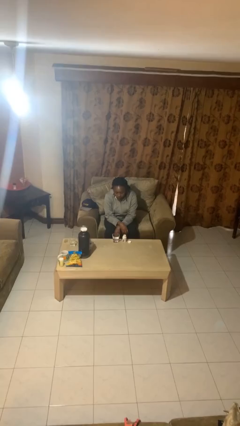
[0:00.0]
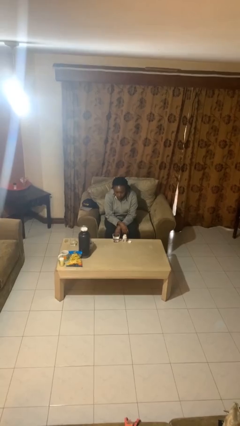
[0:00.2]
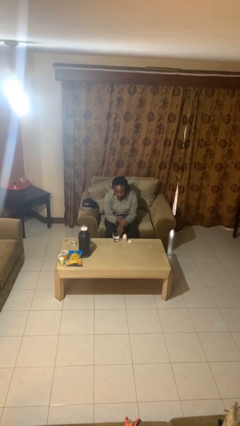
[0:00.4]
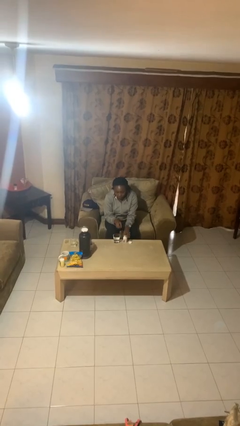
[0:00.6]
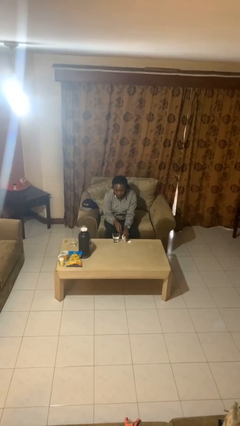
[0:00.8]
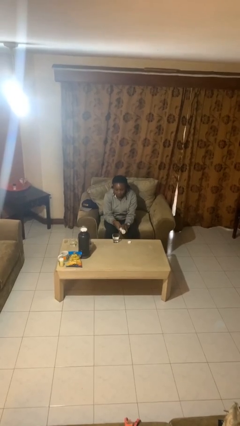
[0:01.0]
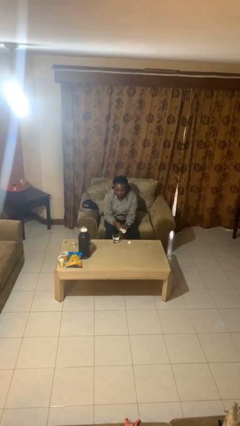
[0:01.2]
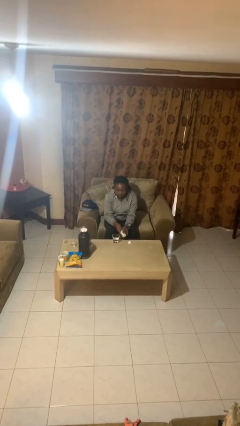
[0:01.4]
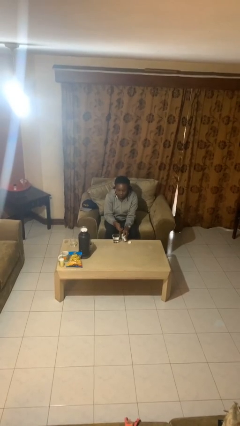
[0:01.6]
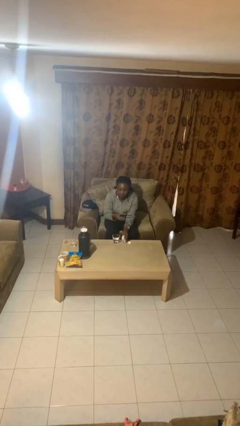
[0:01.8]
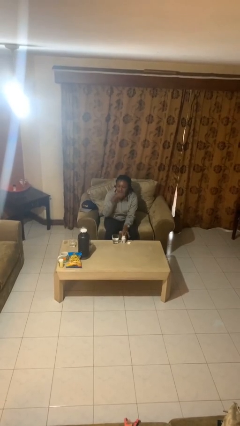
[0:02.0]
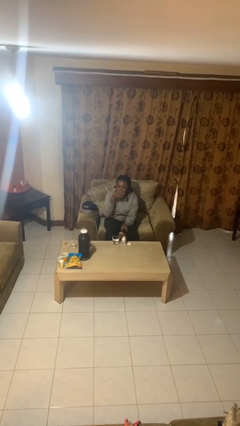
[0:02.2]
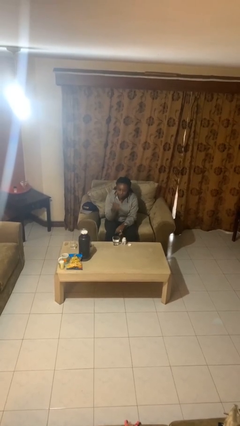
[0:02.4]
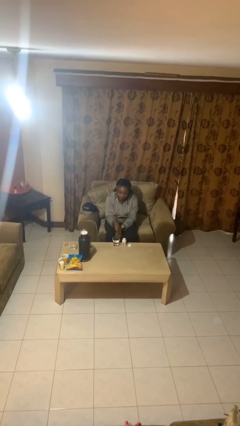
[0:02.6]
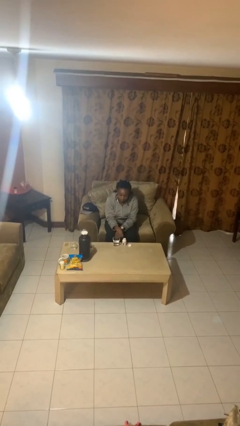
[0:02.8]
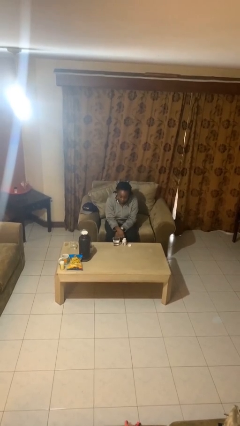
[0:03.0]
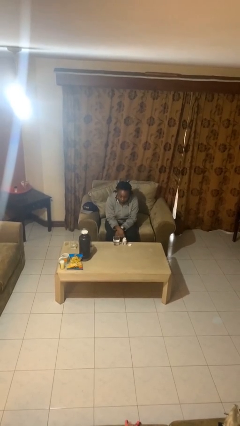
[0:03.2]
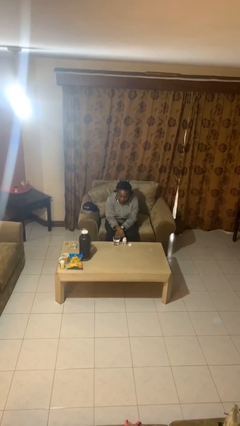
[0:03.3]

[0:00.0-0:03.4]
person takes medicine pills

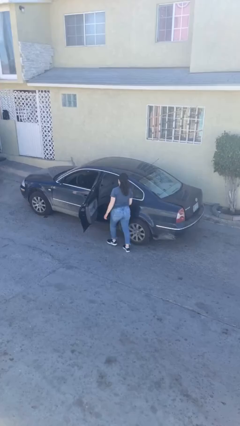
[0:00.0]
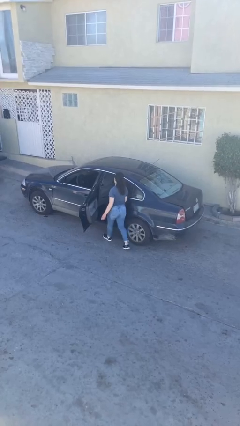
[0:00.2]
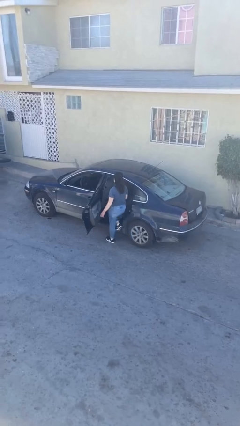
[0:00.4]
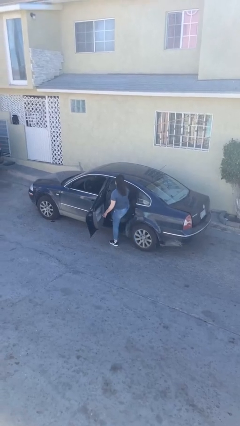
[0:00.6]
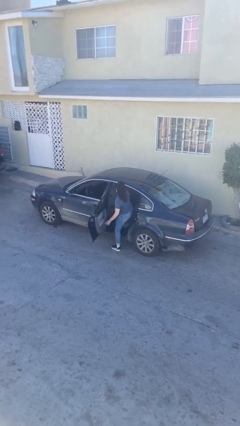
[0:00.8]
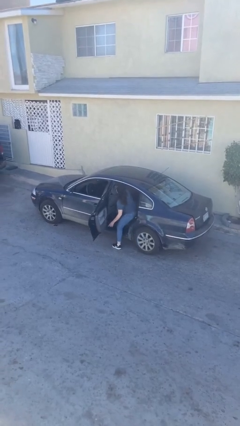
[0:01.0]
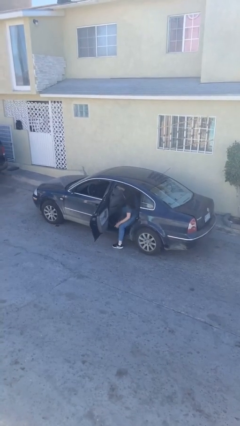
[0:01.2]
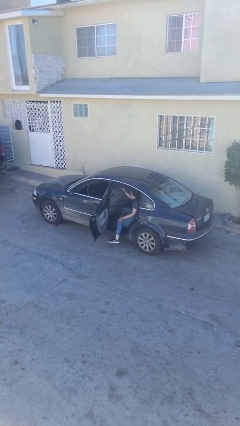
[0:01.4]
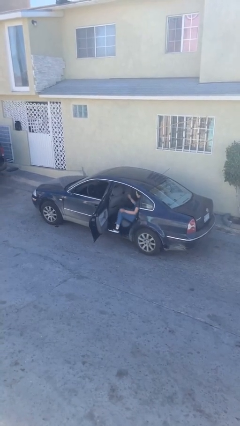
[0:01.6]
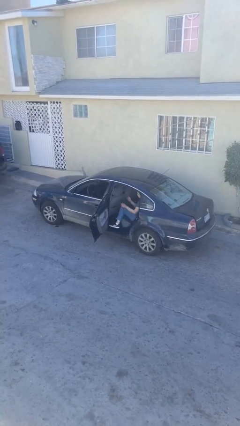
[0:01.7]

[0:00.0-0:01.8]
person enters car

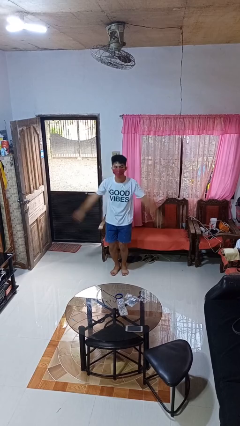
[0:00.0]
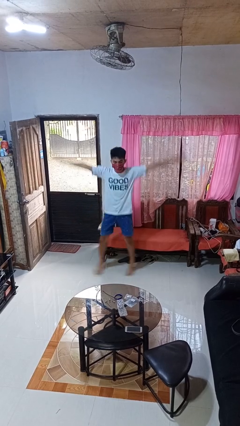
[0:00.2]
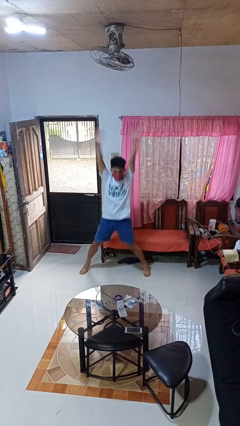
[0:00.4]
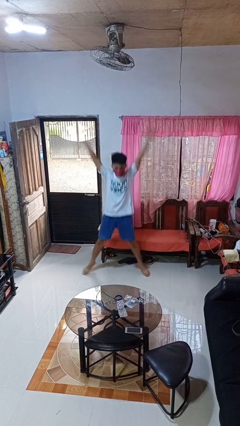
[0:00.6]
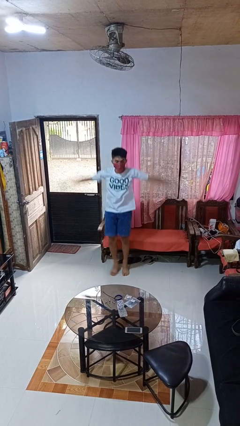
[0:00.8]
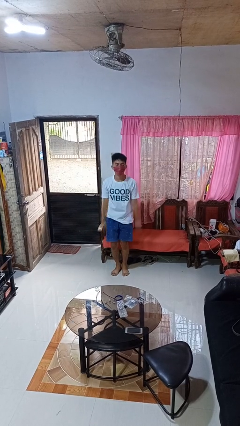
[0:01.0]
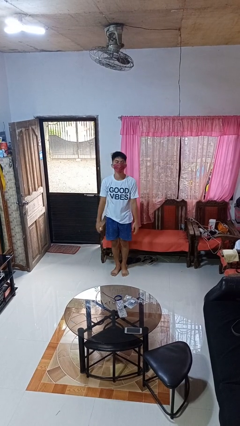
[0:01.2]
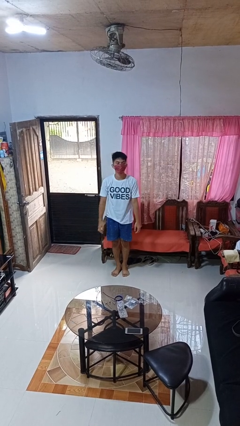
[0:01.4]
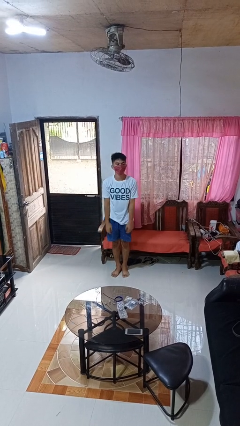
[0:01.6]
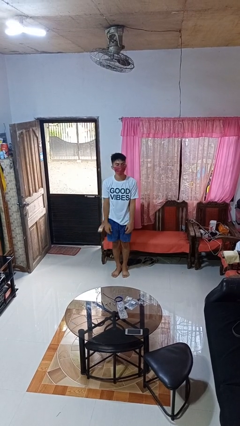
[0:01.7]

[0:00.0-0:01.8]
person exercises with jumping jacks

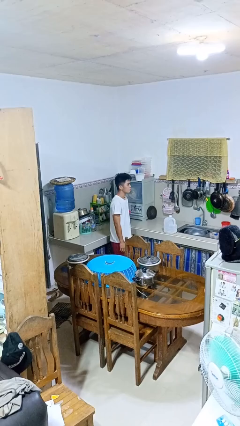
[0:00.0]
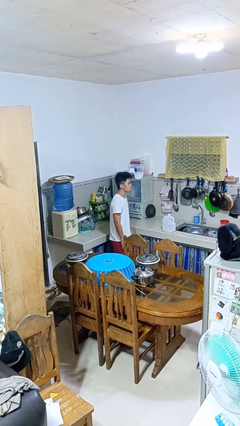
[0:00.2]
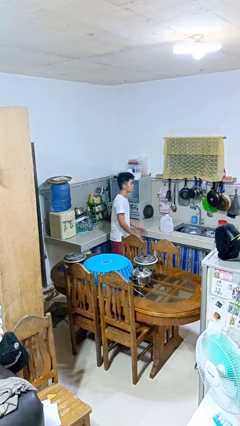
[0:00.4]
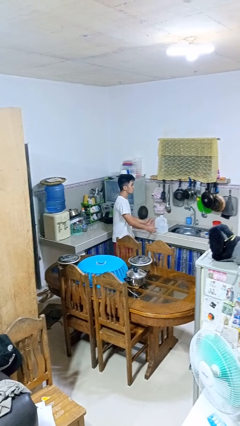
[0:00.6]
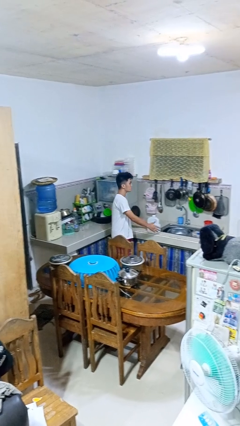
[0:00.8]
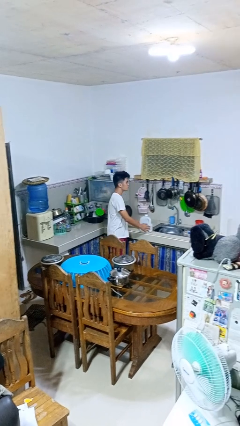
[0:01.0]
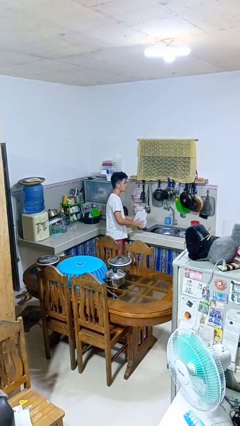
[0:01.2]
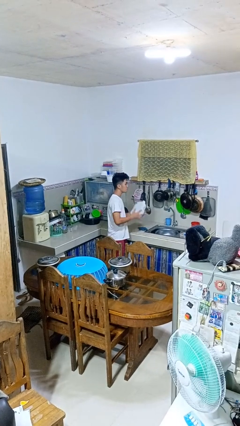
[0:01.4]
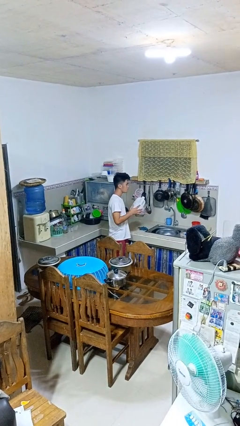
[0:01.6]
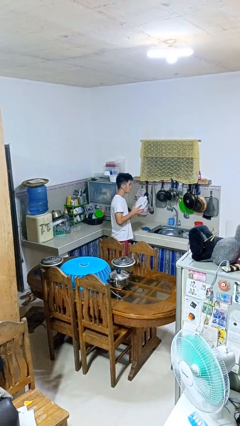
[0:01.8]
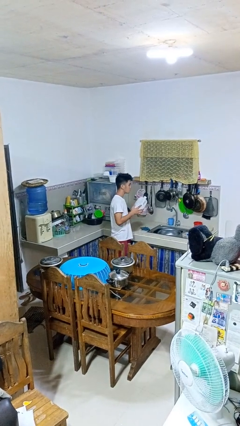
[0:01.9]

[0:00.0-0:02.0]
person picks up object from countertop

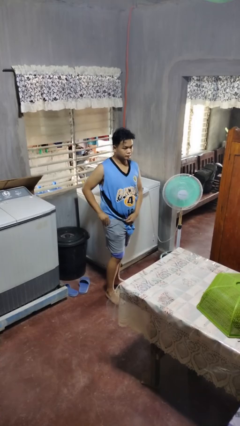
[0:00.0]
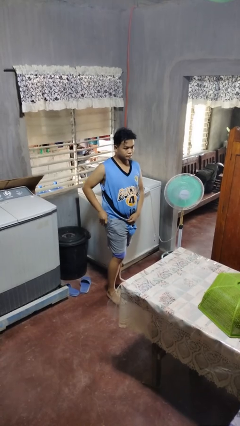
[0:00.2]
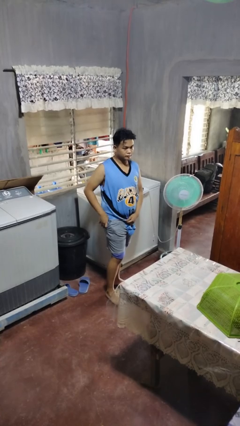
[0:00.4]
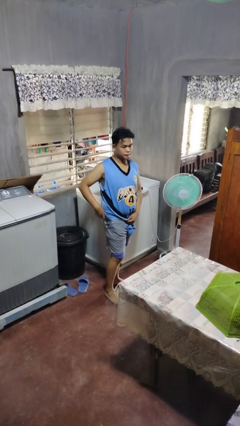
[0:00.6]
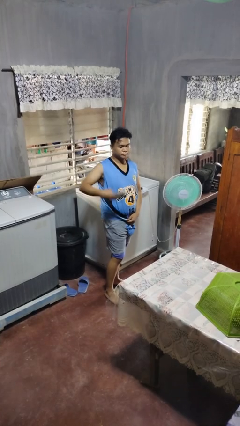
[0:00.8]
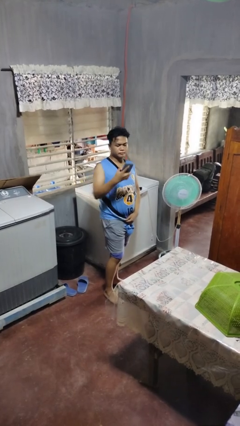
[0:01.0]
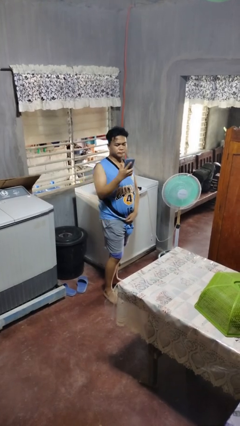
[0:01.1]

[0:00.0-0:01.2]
person takes phone from pocket

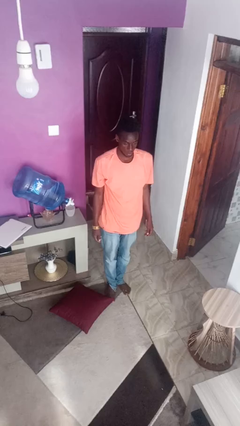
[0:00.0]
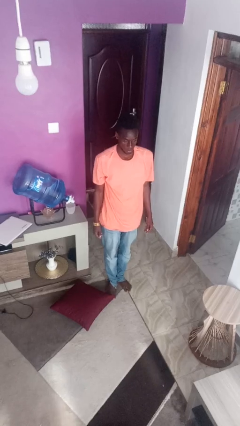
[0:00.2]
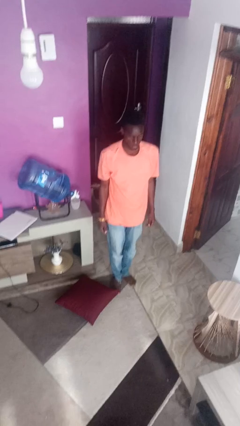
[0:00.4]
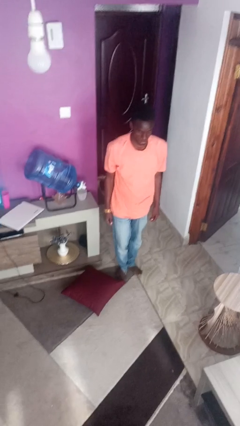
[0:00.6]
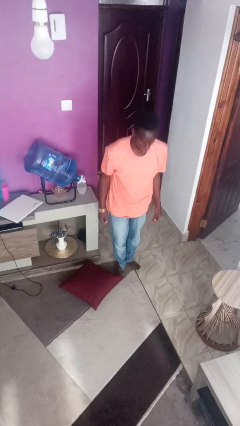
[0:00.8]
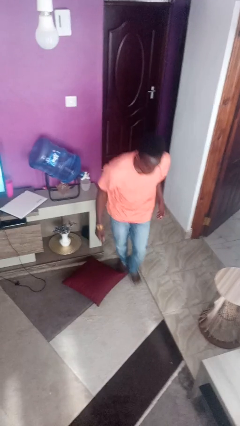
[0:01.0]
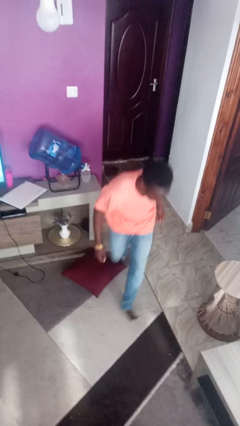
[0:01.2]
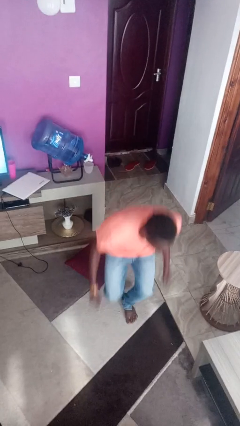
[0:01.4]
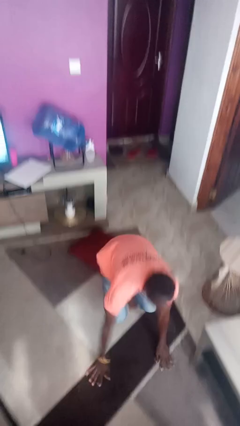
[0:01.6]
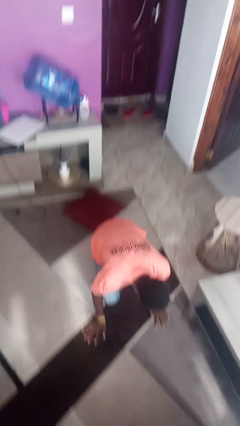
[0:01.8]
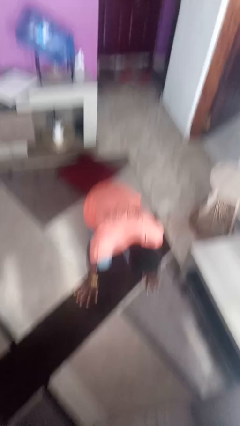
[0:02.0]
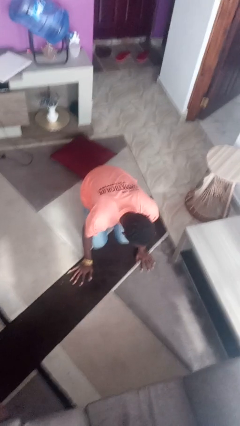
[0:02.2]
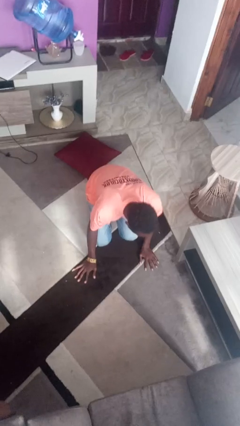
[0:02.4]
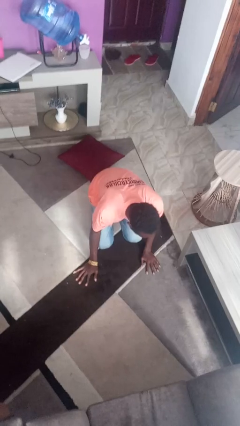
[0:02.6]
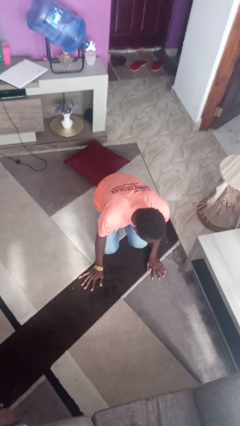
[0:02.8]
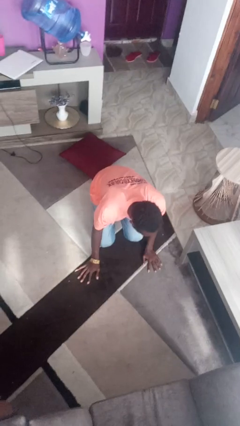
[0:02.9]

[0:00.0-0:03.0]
person trips on object on floor

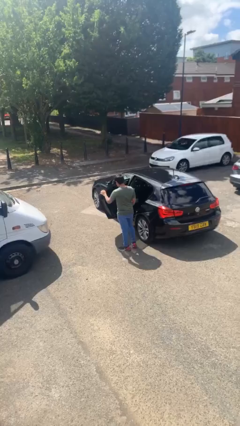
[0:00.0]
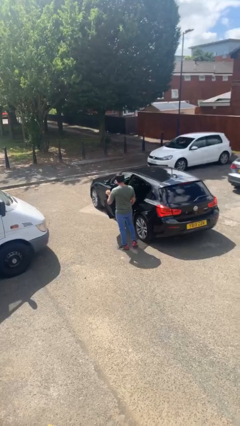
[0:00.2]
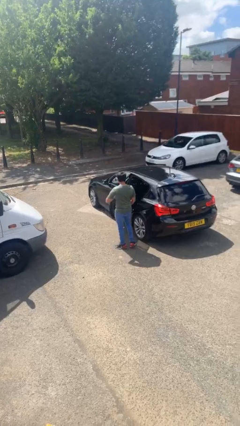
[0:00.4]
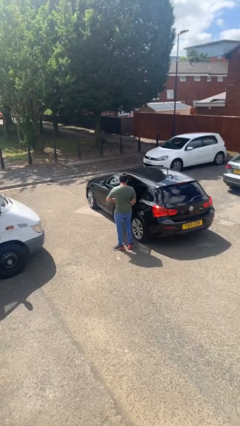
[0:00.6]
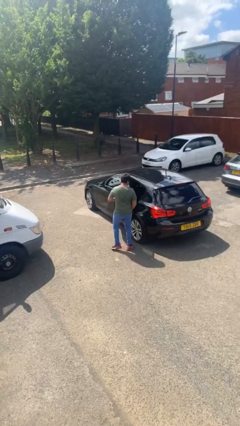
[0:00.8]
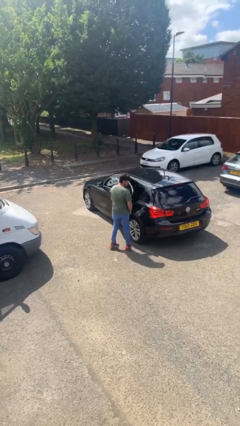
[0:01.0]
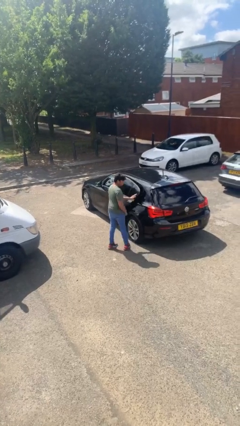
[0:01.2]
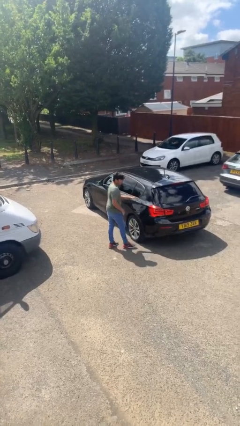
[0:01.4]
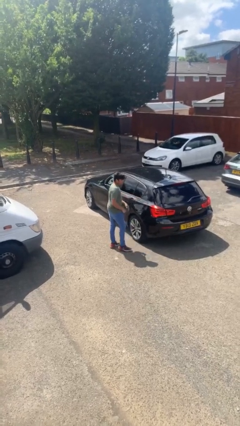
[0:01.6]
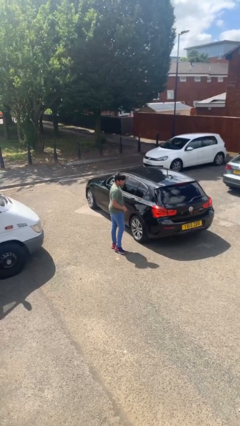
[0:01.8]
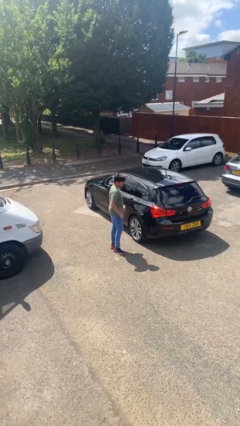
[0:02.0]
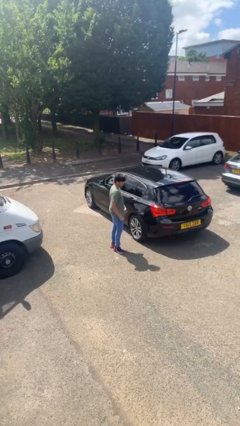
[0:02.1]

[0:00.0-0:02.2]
person closes car door

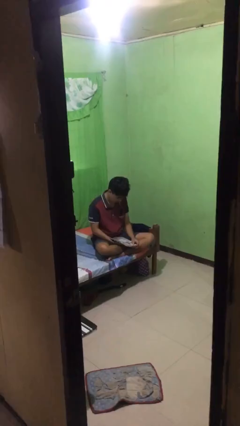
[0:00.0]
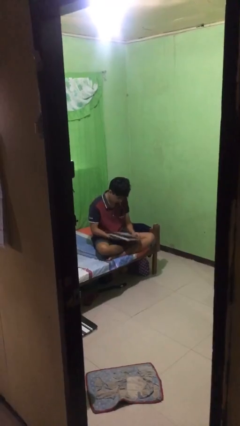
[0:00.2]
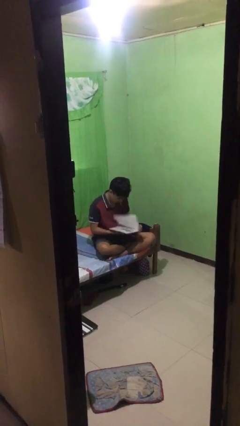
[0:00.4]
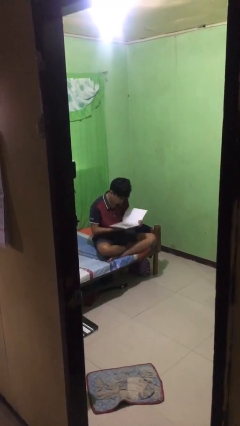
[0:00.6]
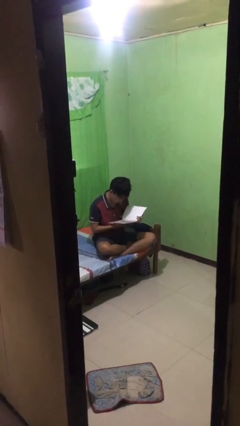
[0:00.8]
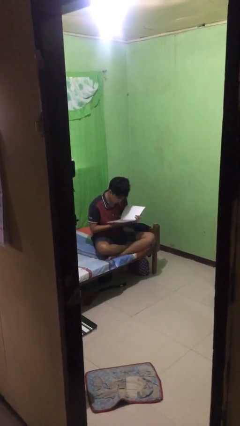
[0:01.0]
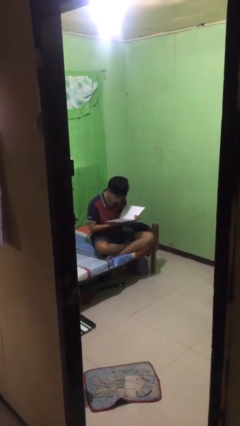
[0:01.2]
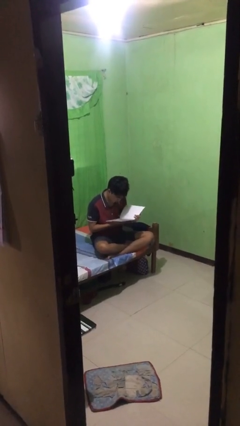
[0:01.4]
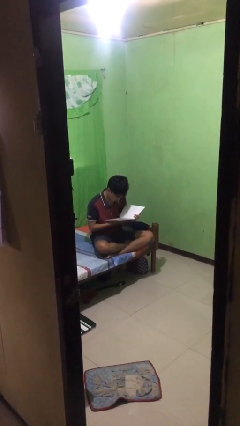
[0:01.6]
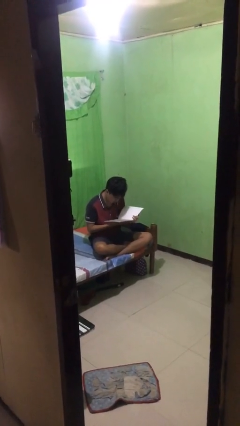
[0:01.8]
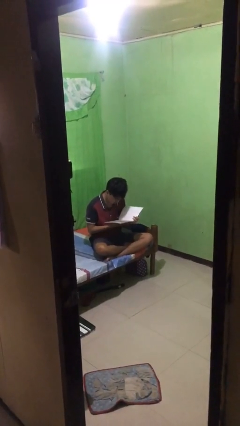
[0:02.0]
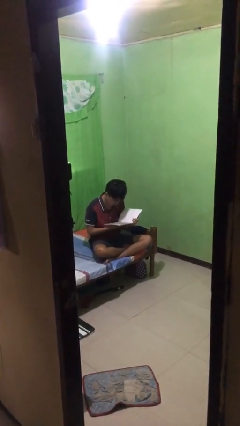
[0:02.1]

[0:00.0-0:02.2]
person reads document
